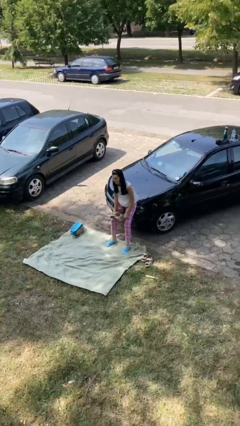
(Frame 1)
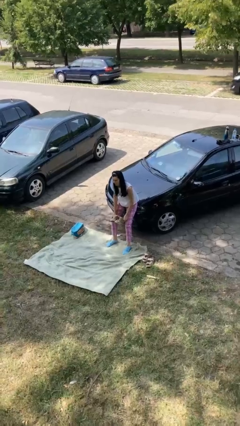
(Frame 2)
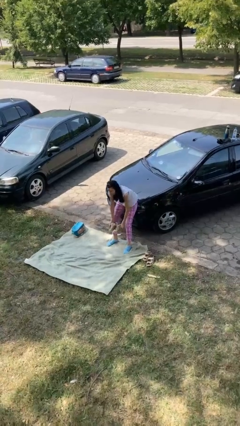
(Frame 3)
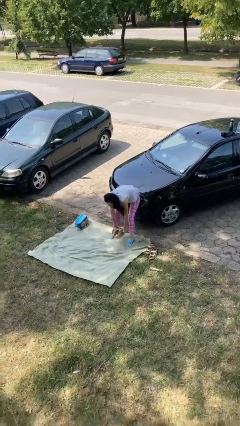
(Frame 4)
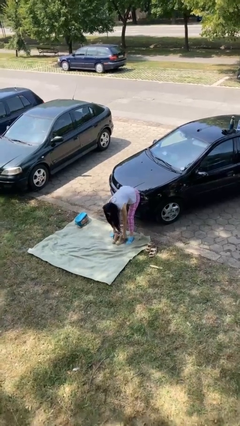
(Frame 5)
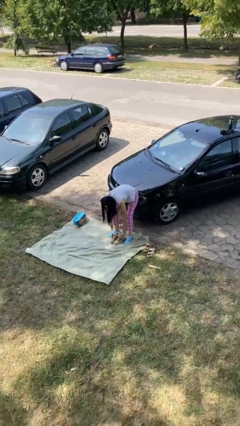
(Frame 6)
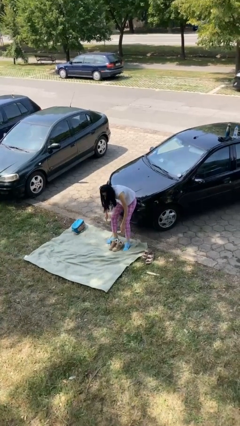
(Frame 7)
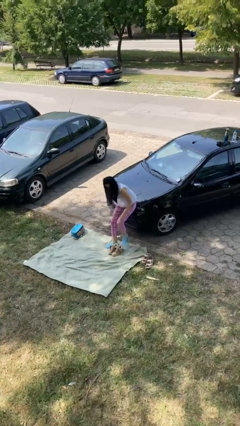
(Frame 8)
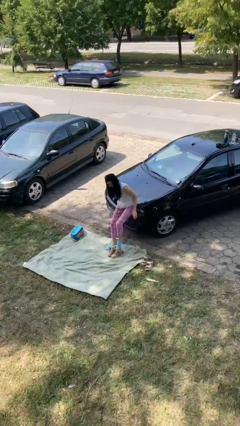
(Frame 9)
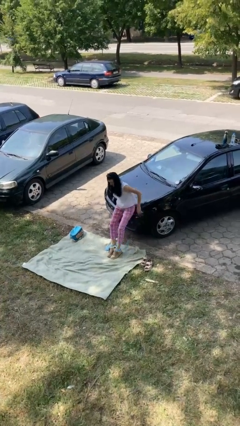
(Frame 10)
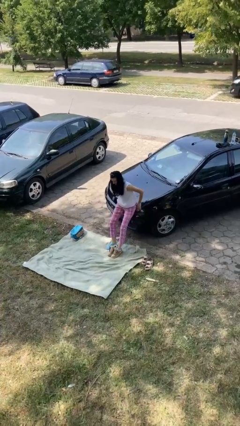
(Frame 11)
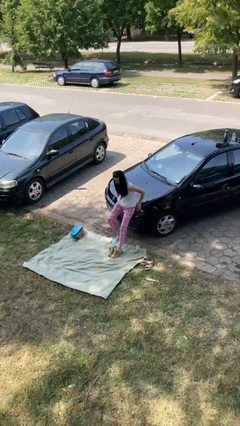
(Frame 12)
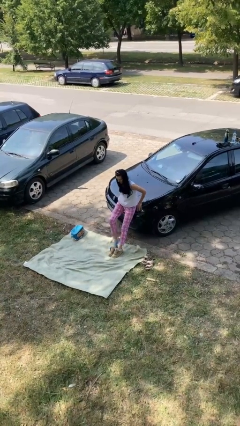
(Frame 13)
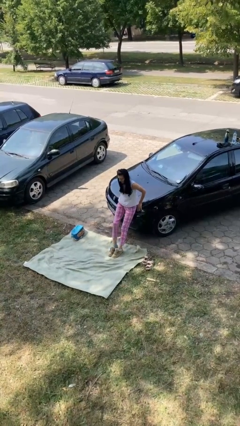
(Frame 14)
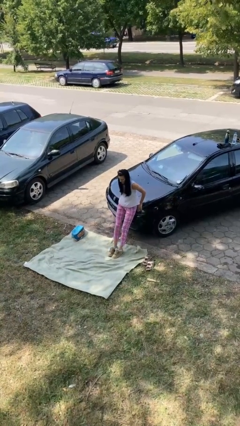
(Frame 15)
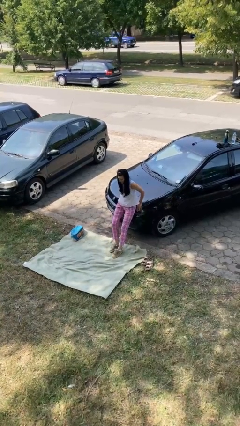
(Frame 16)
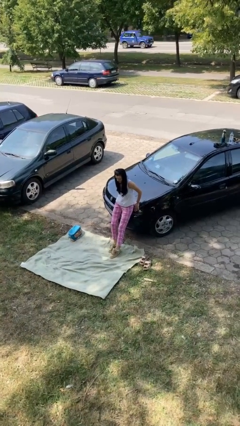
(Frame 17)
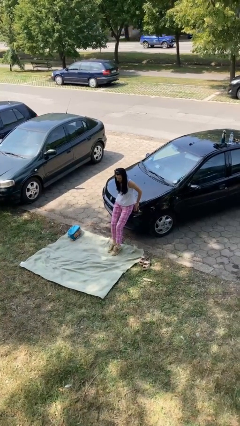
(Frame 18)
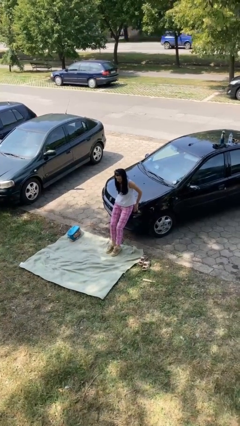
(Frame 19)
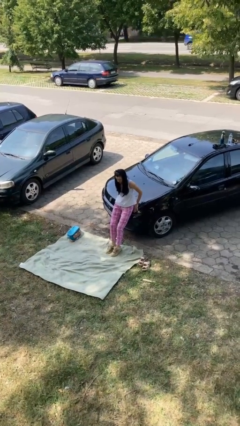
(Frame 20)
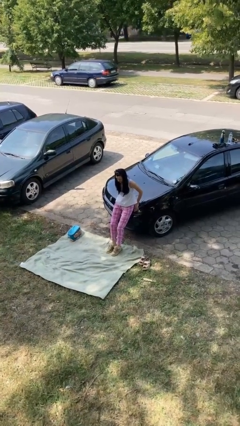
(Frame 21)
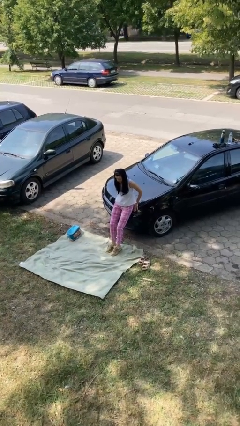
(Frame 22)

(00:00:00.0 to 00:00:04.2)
person puts on shoes

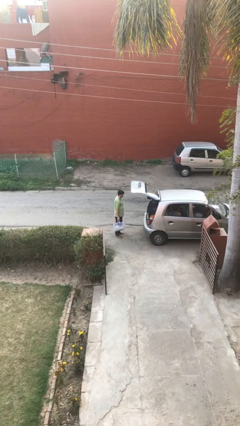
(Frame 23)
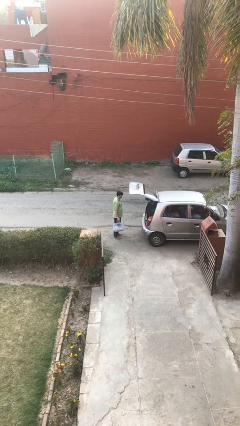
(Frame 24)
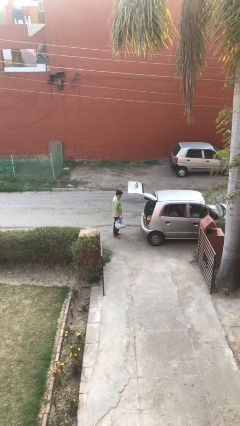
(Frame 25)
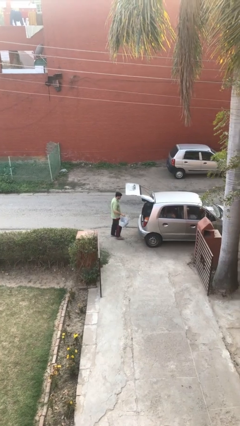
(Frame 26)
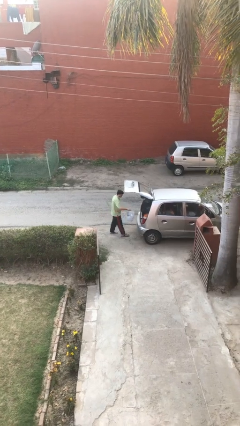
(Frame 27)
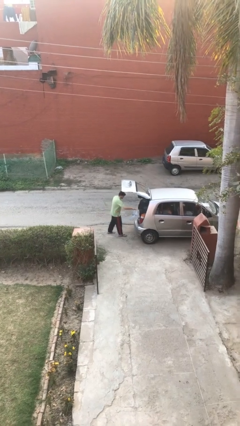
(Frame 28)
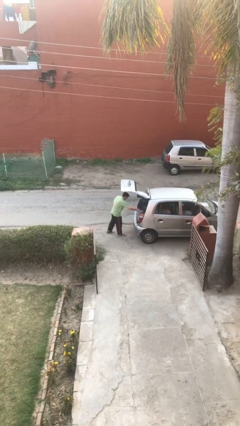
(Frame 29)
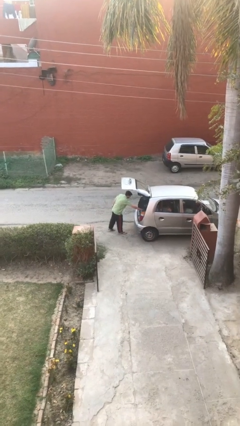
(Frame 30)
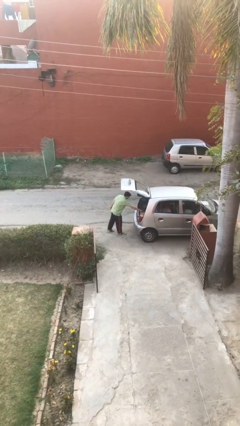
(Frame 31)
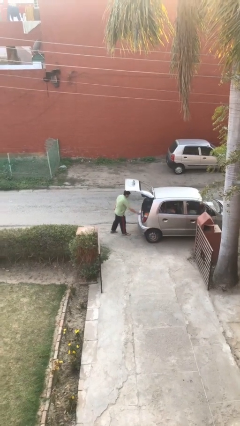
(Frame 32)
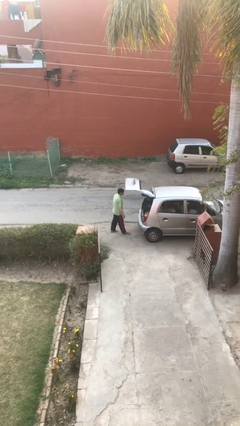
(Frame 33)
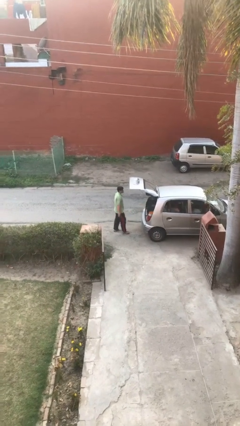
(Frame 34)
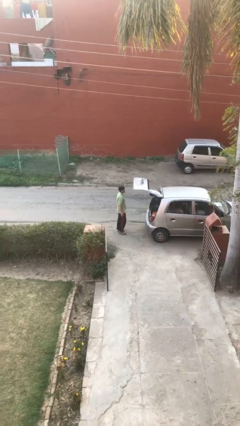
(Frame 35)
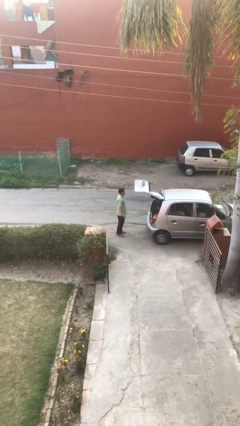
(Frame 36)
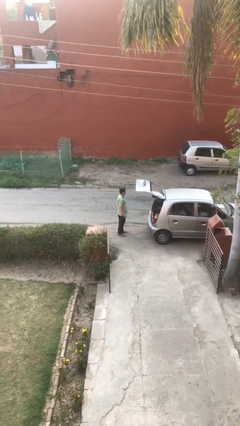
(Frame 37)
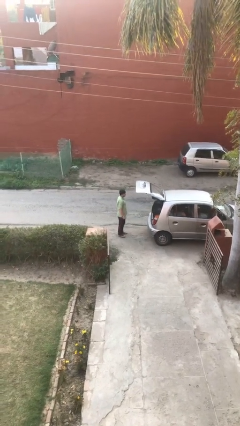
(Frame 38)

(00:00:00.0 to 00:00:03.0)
person loads car

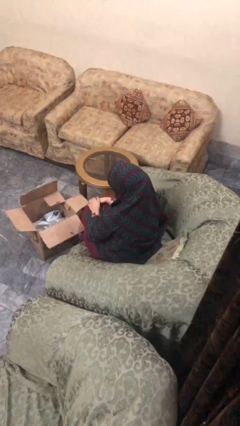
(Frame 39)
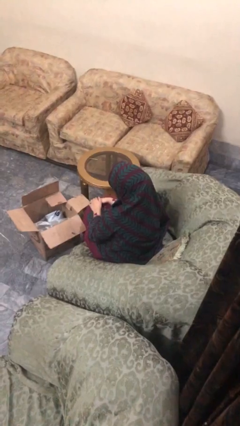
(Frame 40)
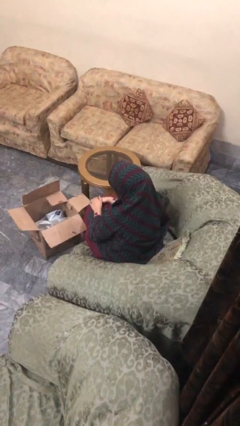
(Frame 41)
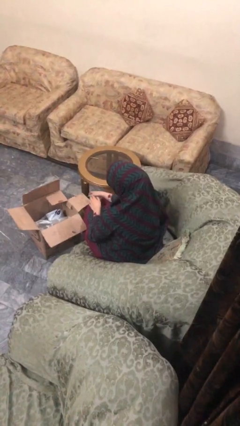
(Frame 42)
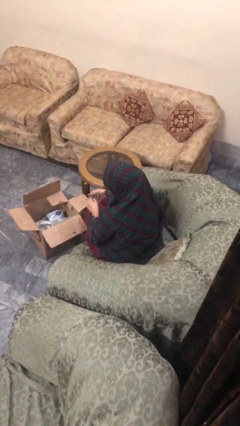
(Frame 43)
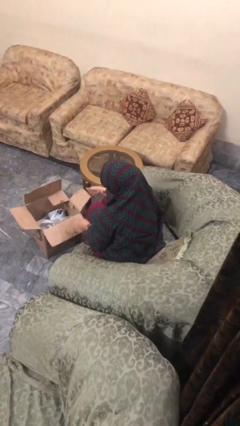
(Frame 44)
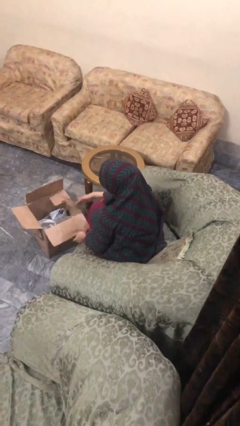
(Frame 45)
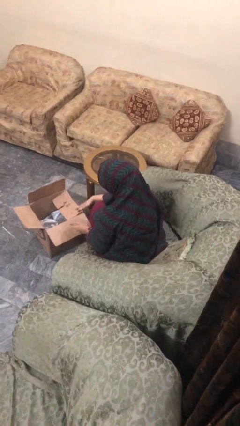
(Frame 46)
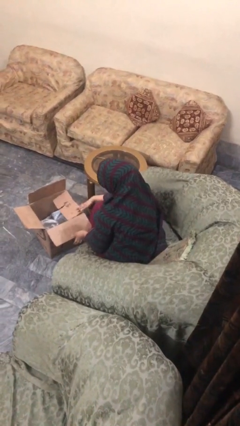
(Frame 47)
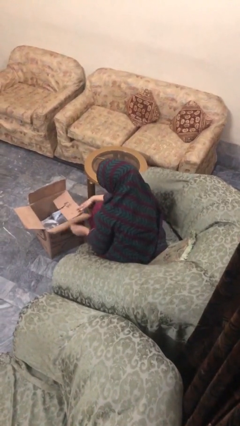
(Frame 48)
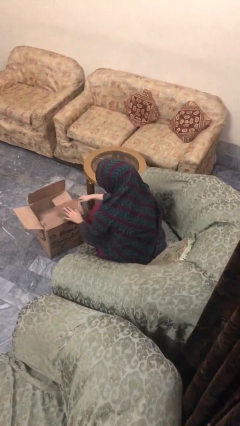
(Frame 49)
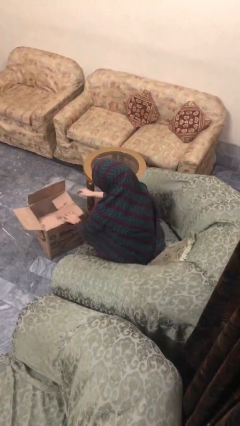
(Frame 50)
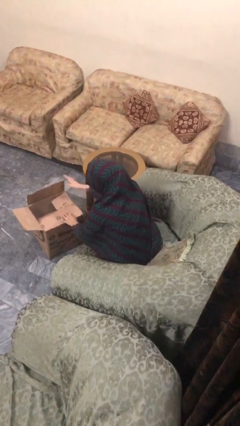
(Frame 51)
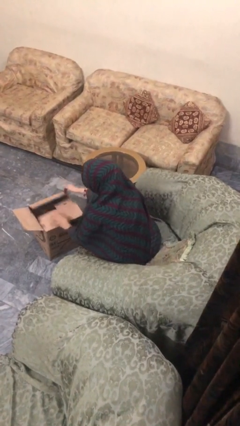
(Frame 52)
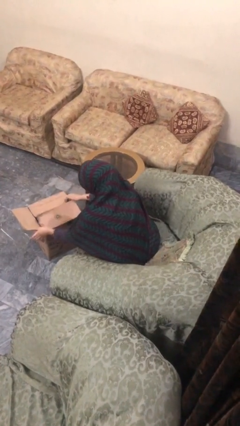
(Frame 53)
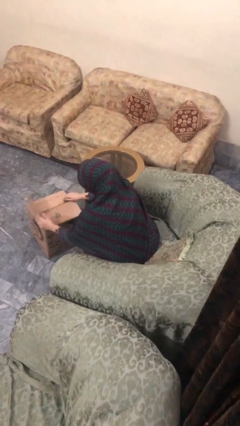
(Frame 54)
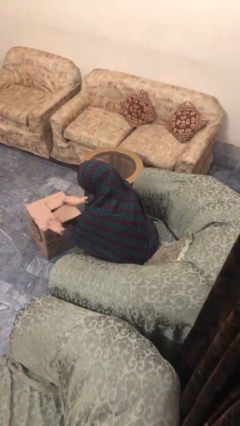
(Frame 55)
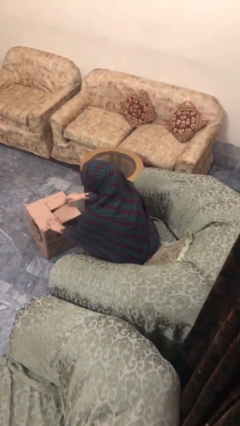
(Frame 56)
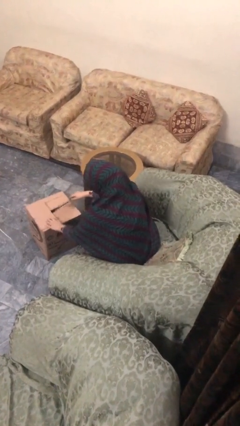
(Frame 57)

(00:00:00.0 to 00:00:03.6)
person closes box

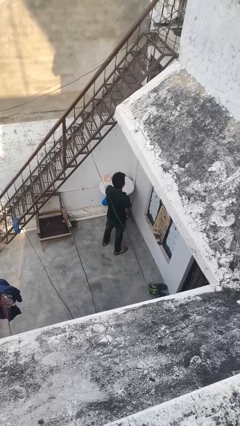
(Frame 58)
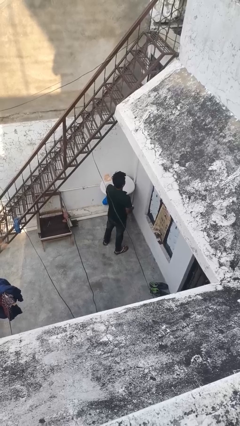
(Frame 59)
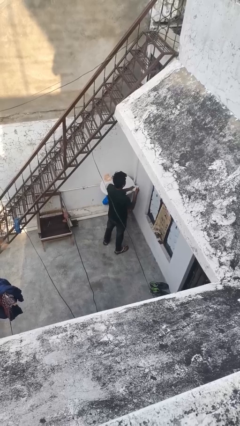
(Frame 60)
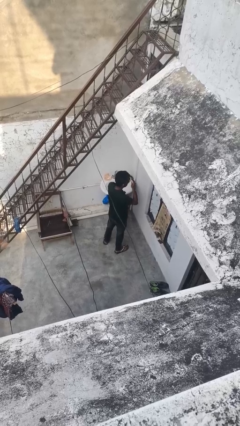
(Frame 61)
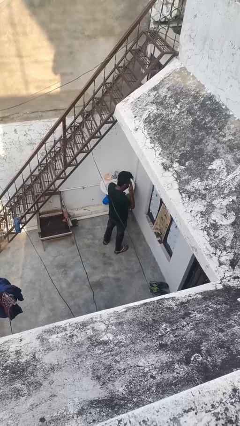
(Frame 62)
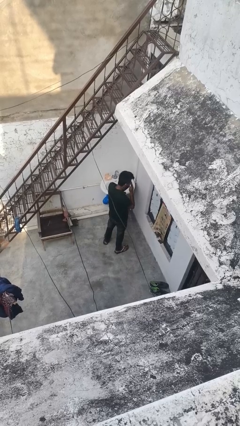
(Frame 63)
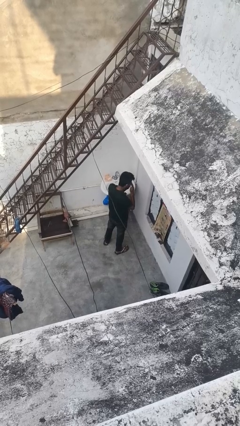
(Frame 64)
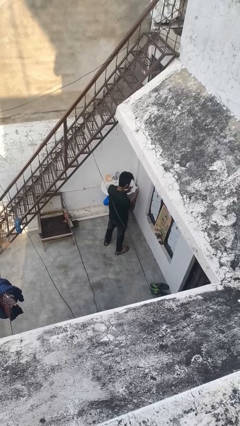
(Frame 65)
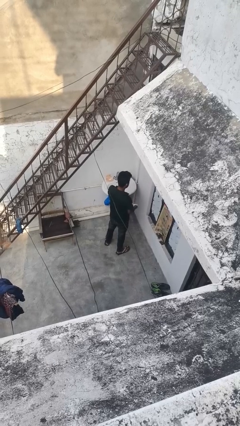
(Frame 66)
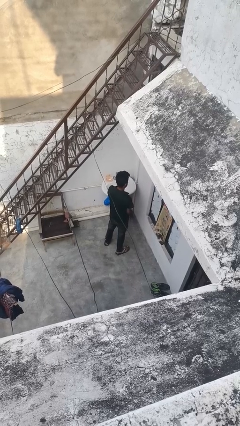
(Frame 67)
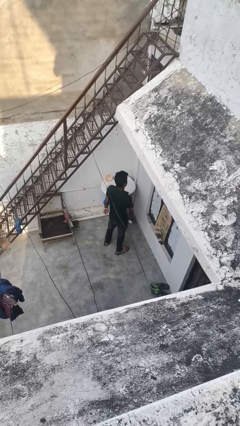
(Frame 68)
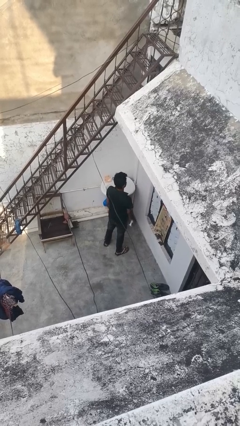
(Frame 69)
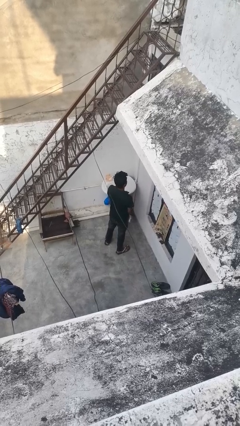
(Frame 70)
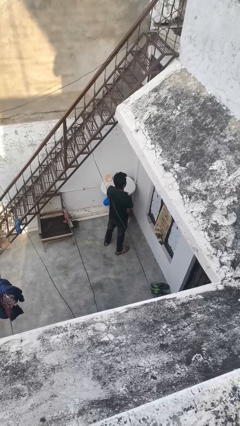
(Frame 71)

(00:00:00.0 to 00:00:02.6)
person blows nose

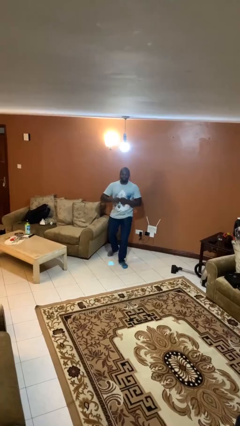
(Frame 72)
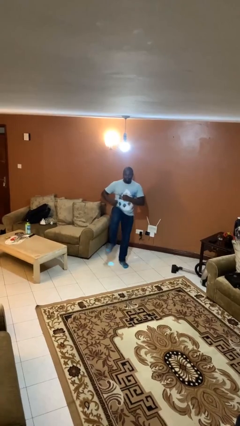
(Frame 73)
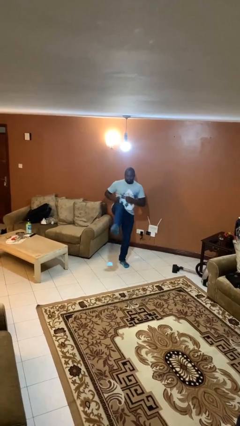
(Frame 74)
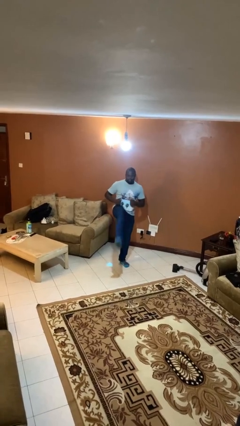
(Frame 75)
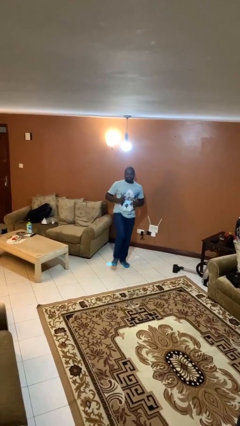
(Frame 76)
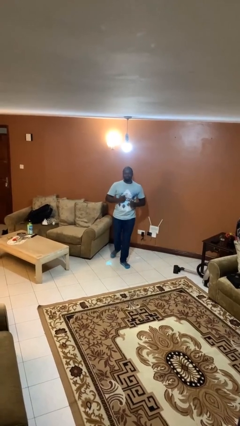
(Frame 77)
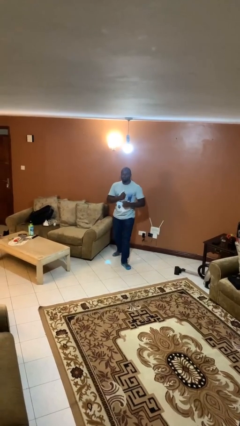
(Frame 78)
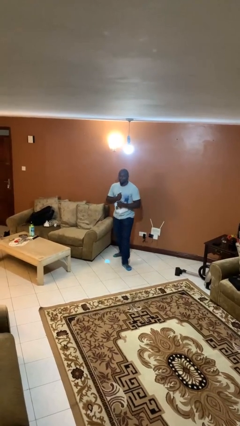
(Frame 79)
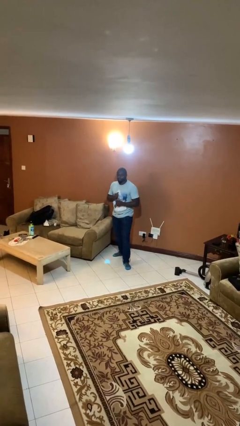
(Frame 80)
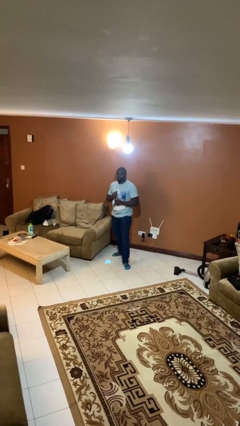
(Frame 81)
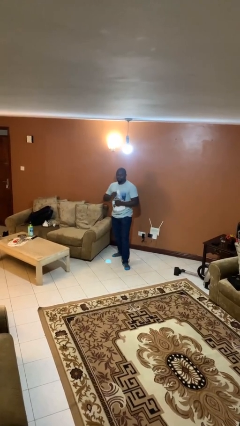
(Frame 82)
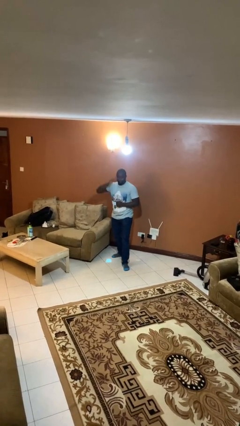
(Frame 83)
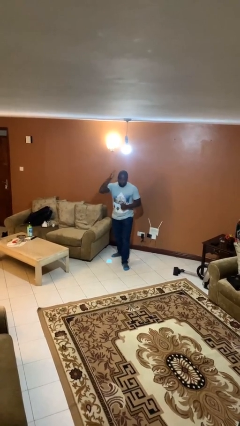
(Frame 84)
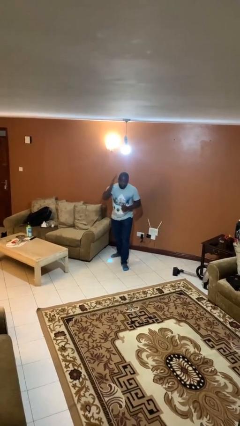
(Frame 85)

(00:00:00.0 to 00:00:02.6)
person karate kicks

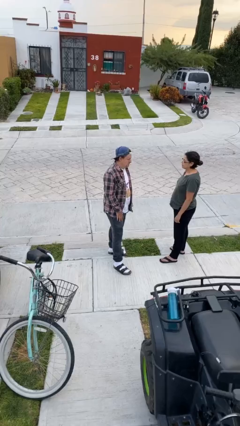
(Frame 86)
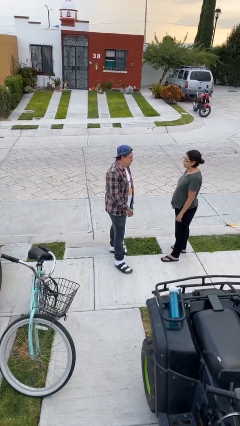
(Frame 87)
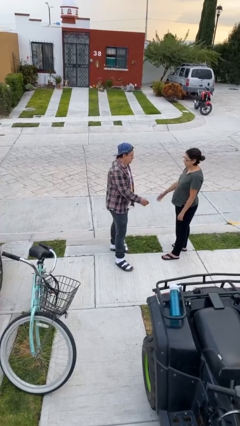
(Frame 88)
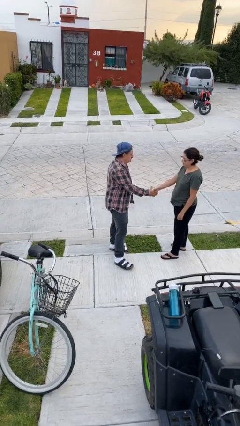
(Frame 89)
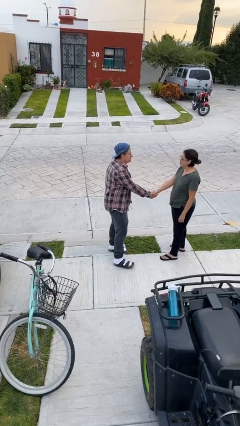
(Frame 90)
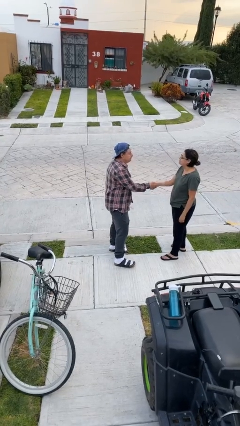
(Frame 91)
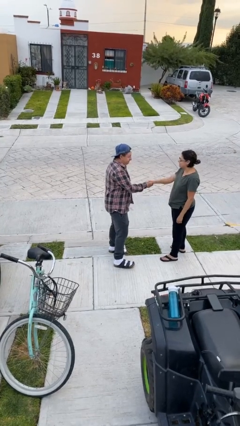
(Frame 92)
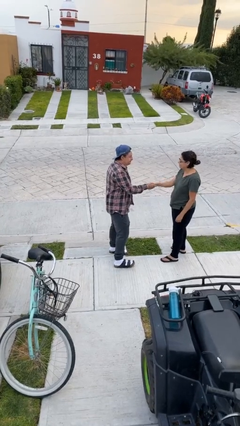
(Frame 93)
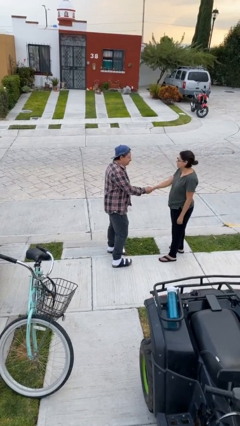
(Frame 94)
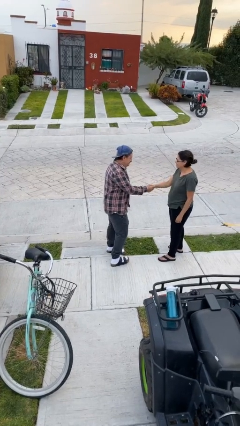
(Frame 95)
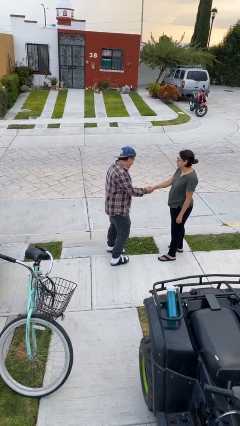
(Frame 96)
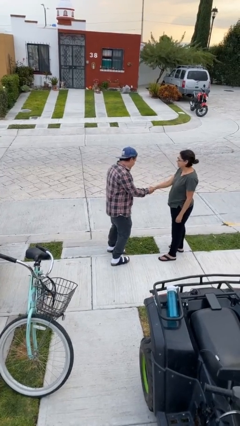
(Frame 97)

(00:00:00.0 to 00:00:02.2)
person shakes hand
